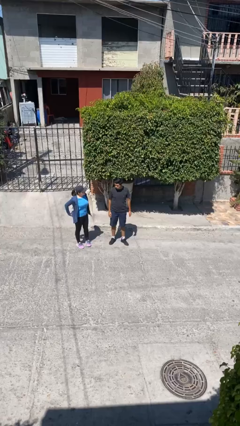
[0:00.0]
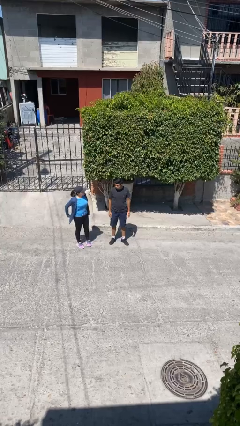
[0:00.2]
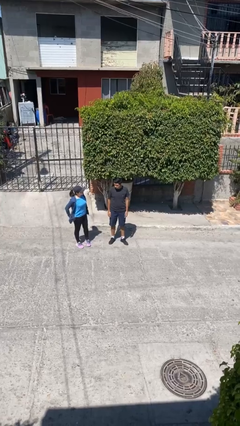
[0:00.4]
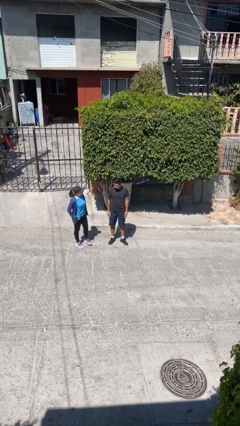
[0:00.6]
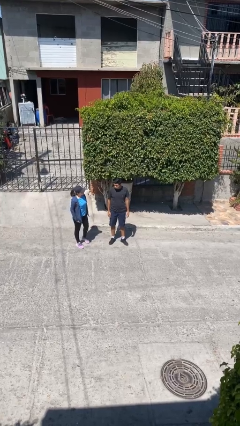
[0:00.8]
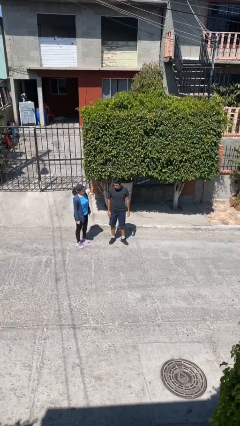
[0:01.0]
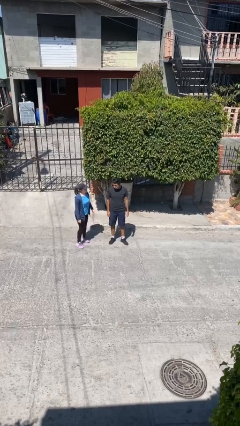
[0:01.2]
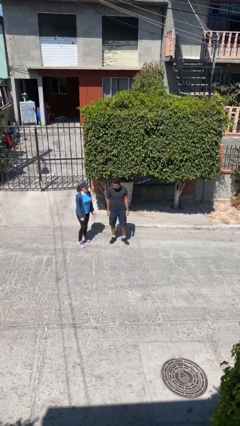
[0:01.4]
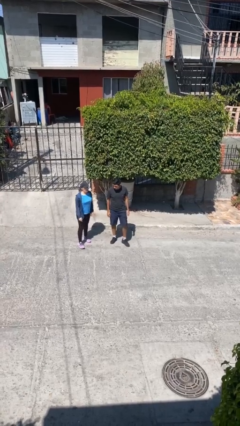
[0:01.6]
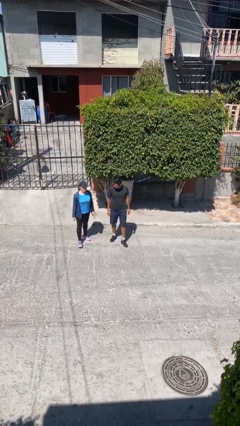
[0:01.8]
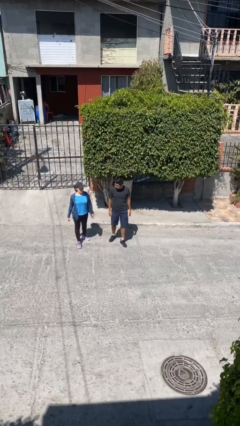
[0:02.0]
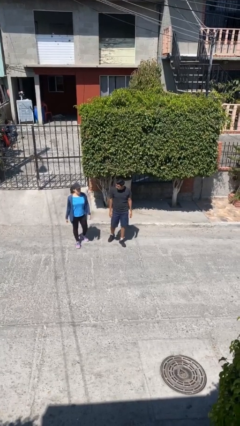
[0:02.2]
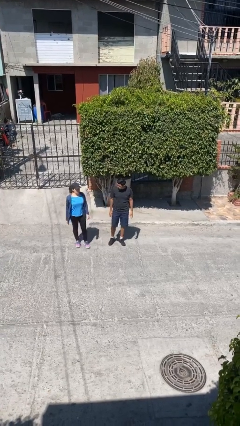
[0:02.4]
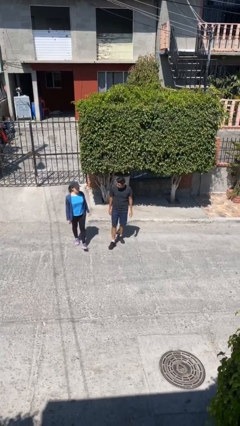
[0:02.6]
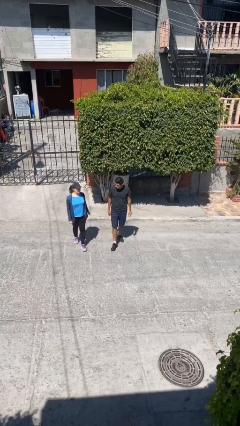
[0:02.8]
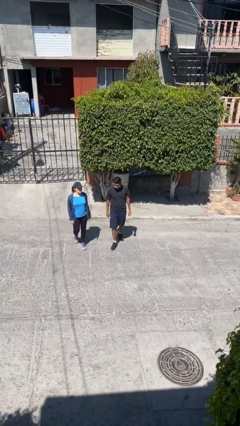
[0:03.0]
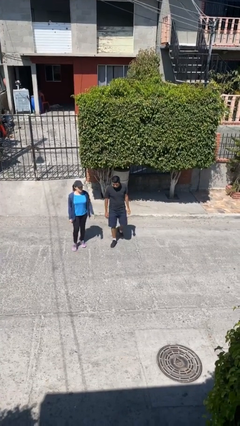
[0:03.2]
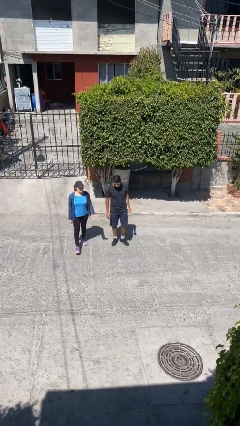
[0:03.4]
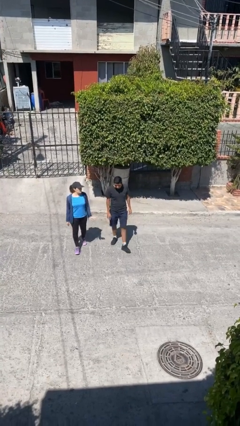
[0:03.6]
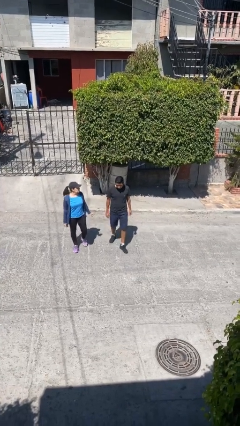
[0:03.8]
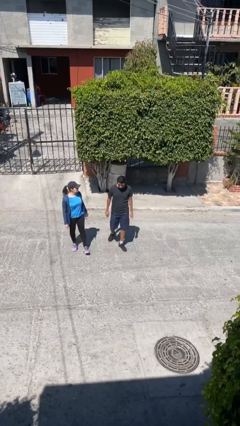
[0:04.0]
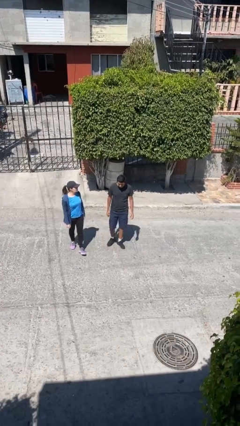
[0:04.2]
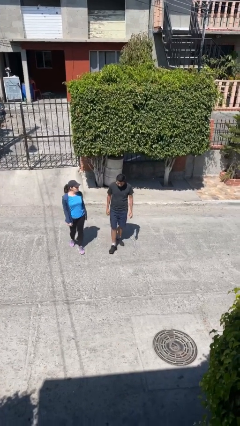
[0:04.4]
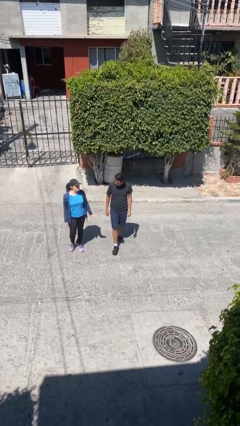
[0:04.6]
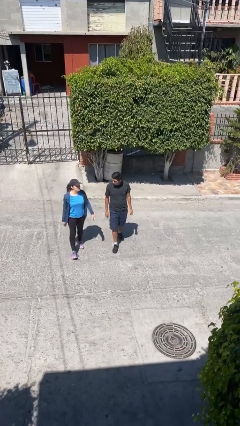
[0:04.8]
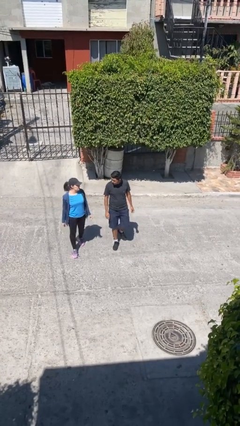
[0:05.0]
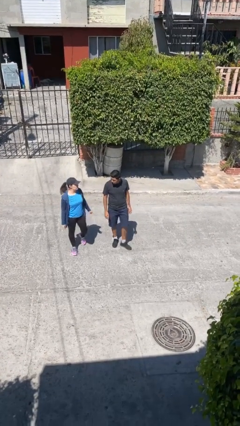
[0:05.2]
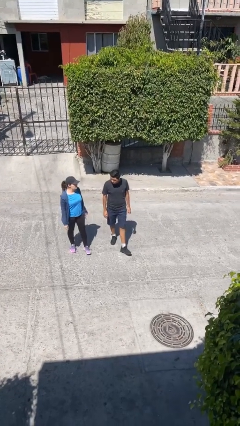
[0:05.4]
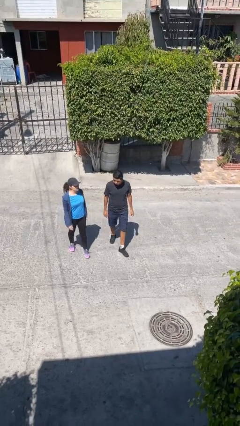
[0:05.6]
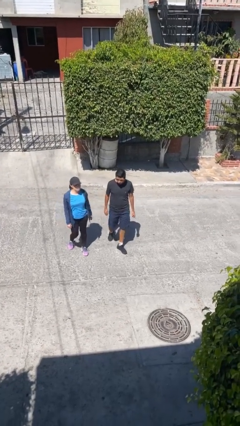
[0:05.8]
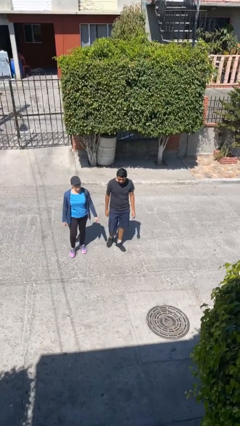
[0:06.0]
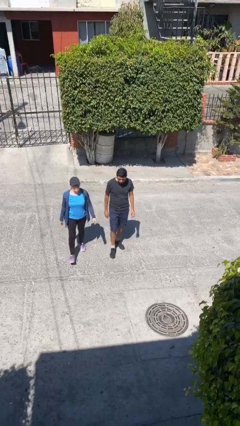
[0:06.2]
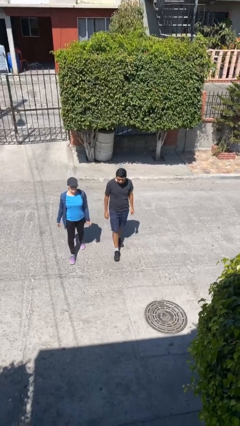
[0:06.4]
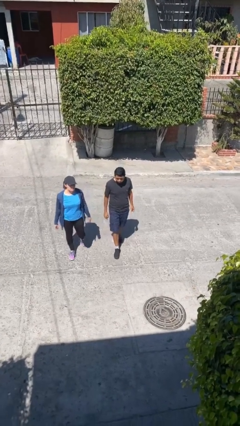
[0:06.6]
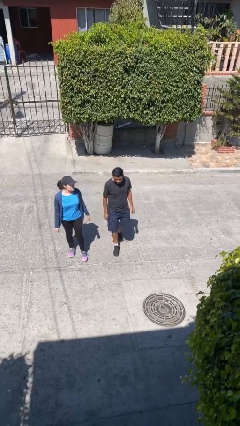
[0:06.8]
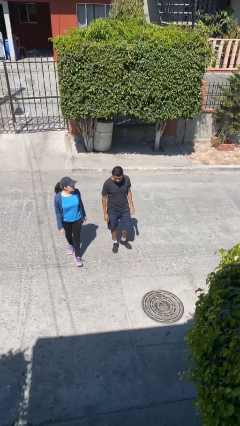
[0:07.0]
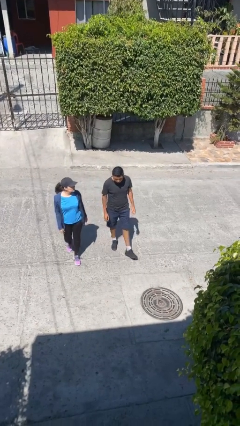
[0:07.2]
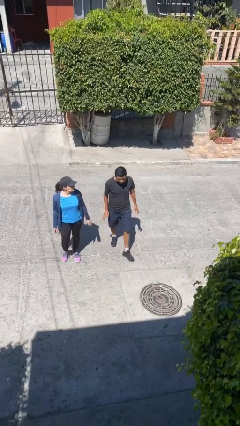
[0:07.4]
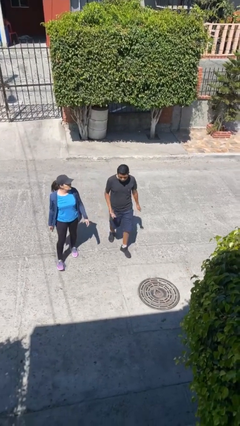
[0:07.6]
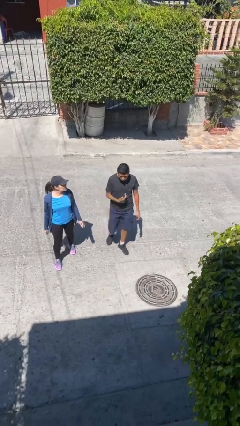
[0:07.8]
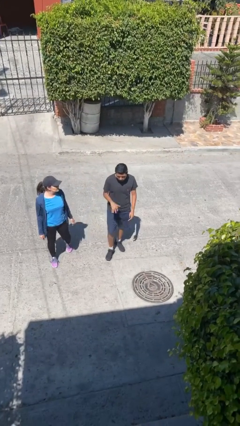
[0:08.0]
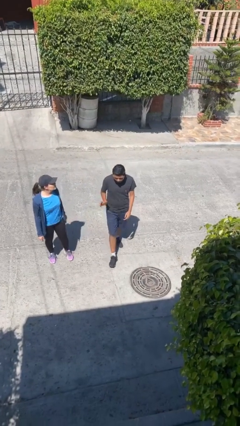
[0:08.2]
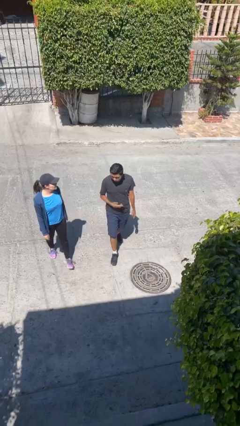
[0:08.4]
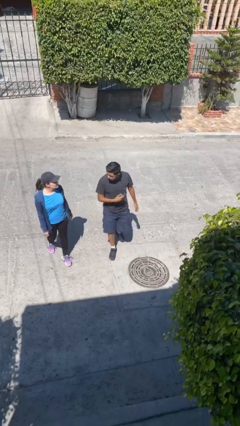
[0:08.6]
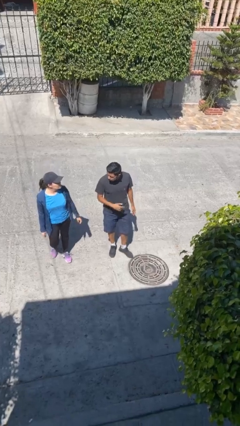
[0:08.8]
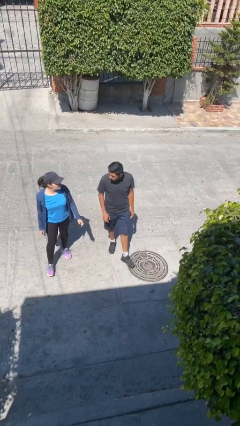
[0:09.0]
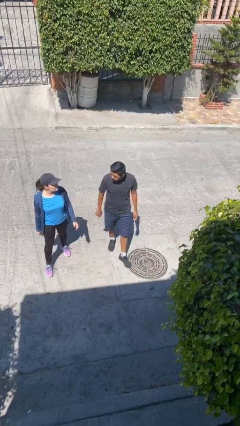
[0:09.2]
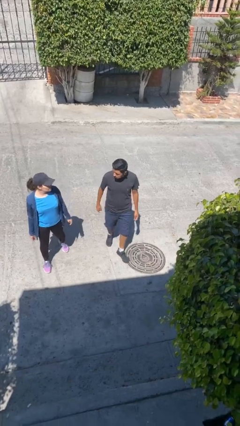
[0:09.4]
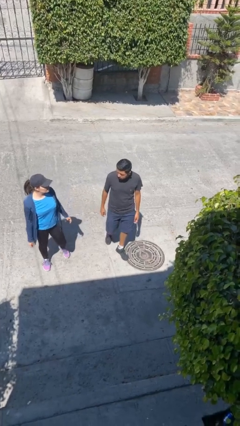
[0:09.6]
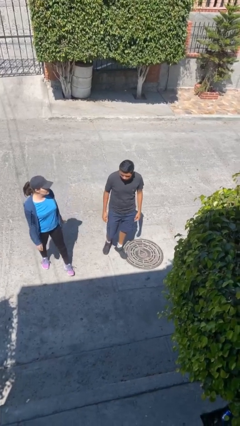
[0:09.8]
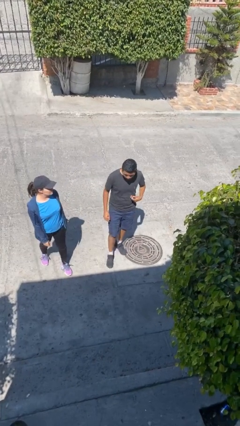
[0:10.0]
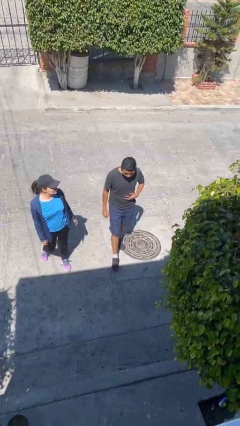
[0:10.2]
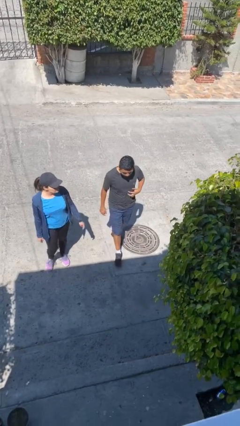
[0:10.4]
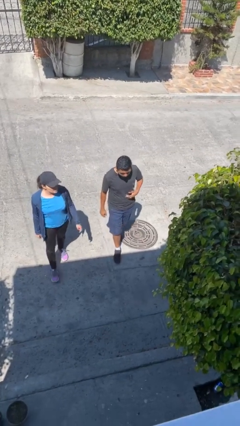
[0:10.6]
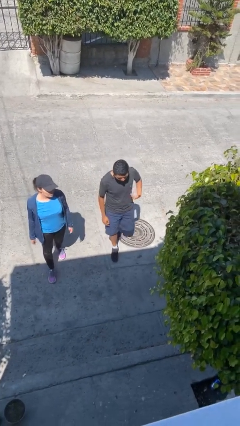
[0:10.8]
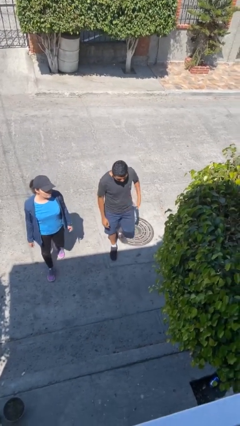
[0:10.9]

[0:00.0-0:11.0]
person talks to person

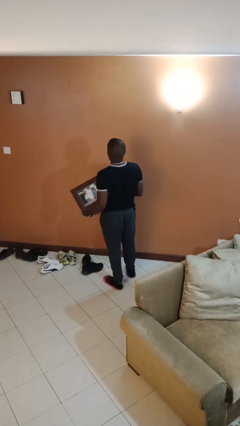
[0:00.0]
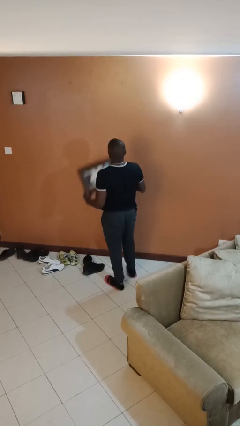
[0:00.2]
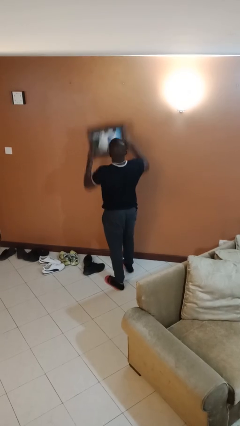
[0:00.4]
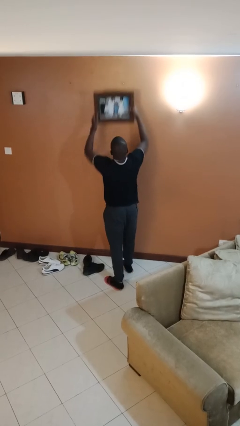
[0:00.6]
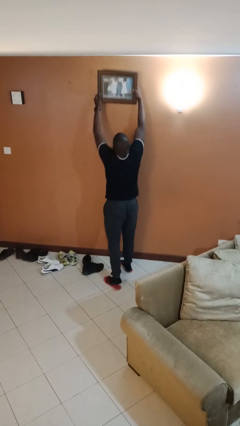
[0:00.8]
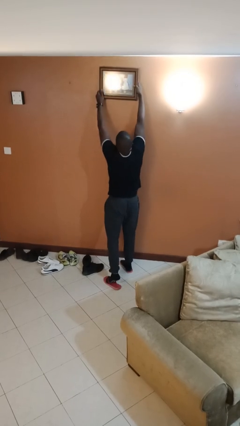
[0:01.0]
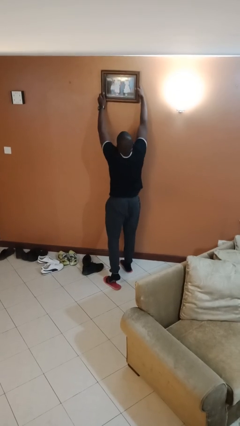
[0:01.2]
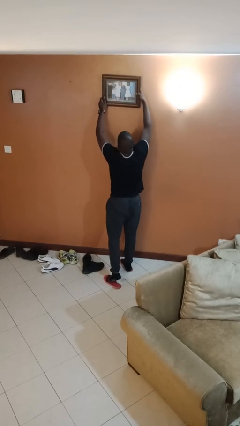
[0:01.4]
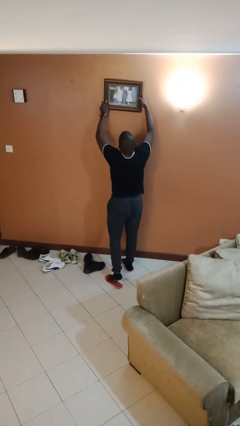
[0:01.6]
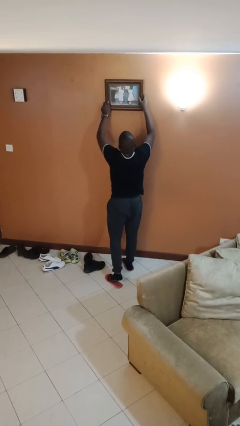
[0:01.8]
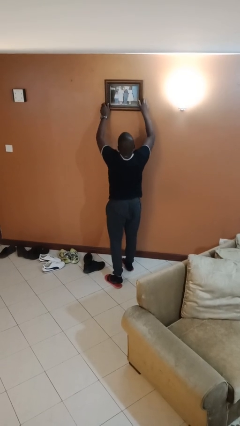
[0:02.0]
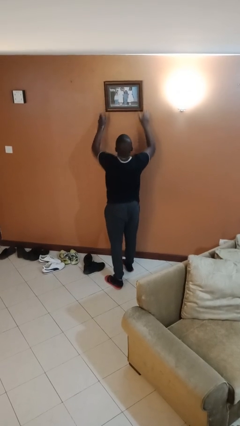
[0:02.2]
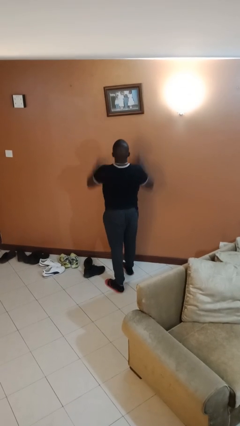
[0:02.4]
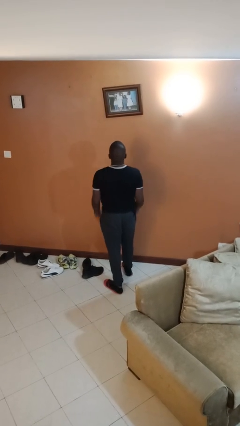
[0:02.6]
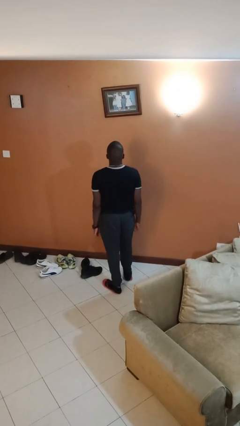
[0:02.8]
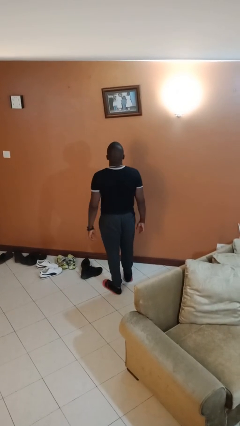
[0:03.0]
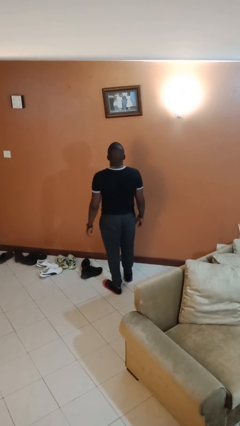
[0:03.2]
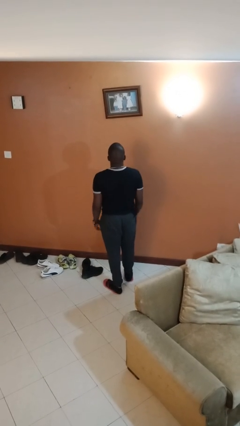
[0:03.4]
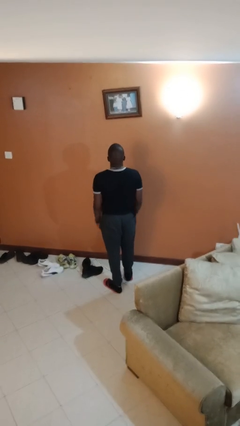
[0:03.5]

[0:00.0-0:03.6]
person puts up picture frame

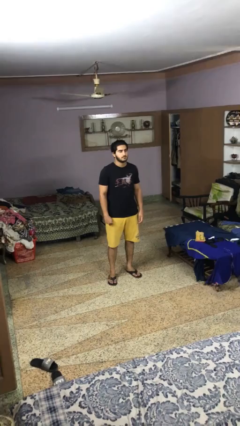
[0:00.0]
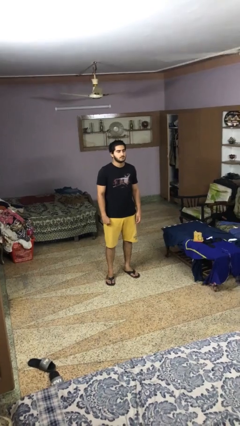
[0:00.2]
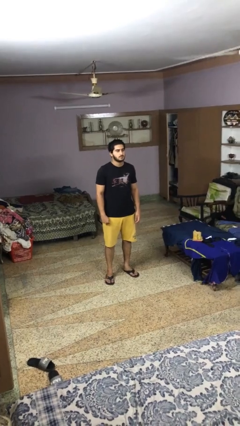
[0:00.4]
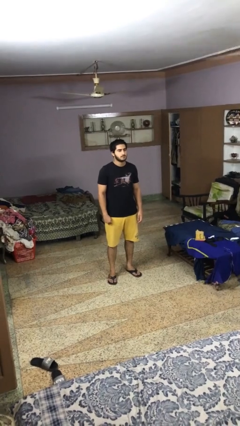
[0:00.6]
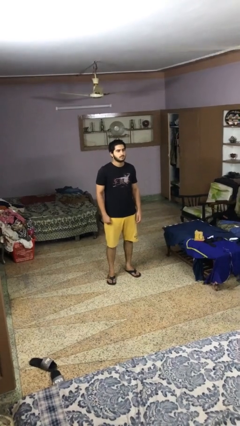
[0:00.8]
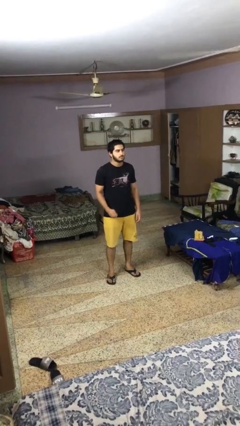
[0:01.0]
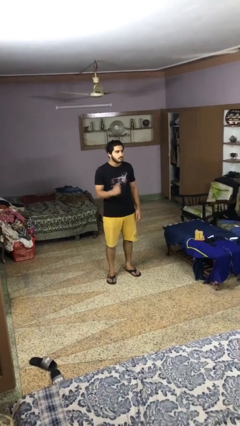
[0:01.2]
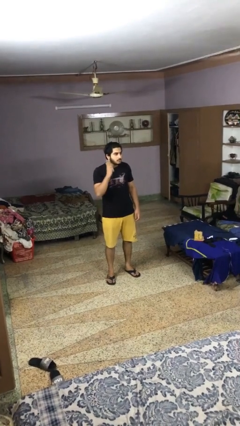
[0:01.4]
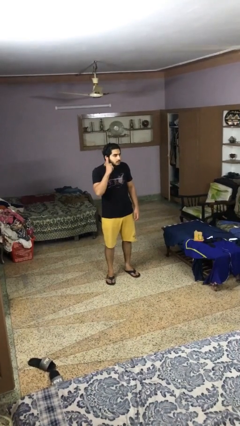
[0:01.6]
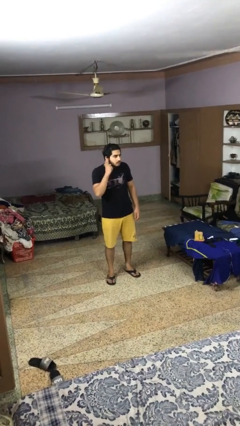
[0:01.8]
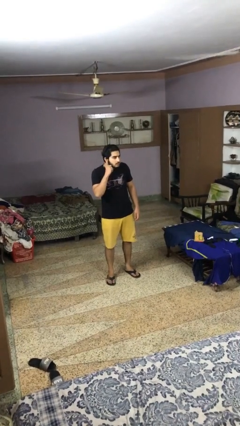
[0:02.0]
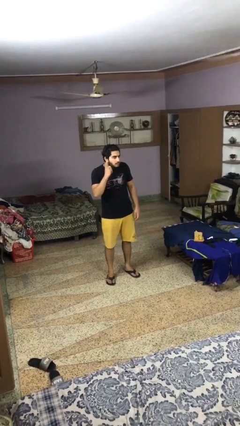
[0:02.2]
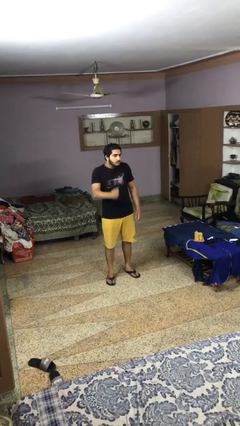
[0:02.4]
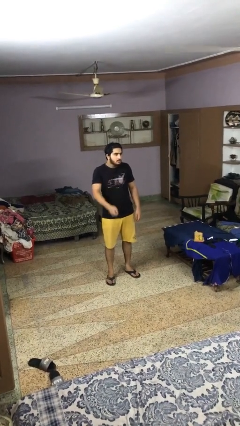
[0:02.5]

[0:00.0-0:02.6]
person gestures listen closely

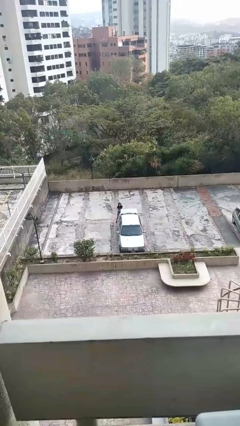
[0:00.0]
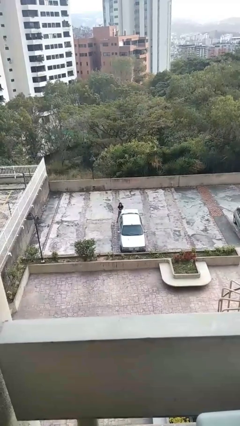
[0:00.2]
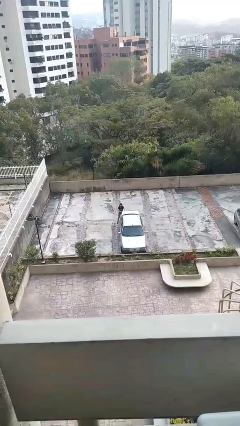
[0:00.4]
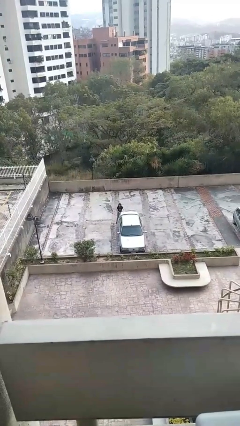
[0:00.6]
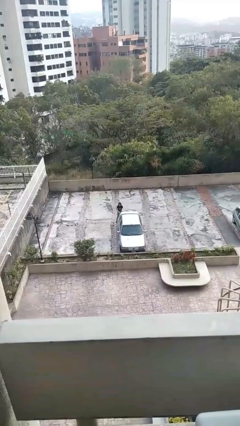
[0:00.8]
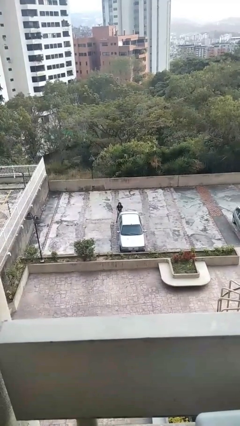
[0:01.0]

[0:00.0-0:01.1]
person closes car trunk
